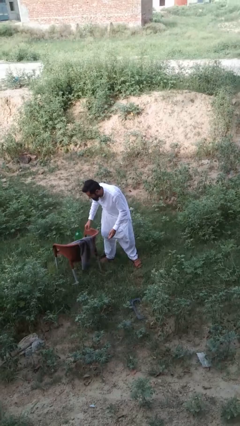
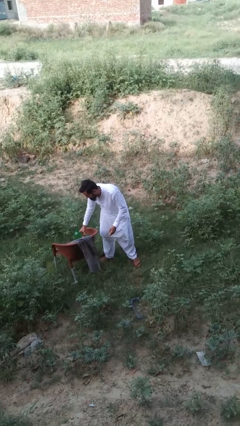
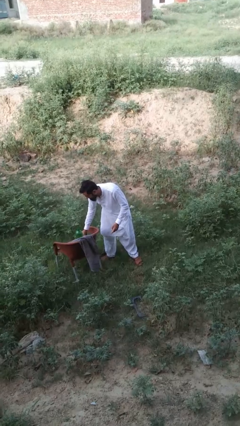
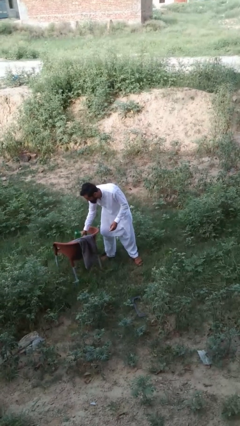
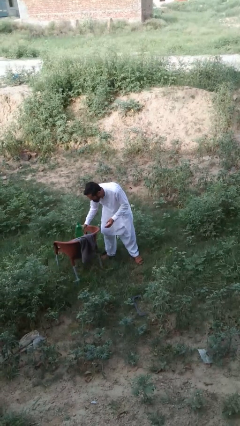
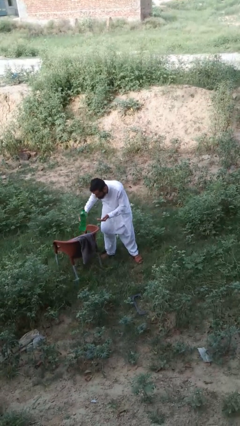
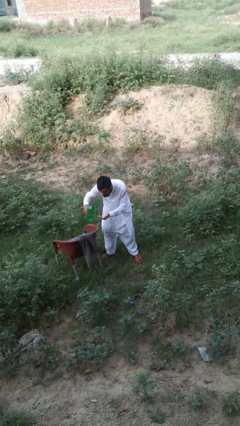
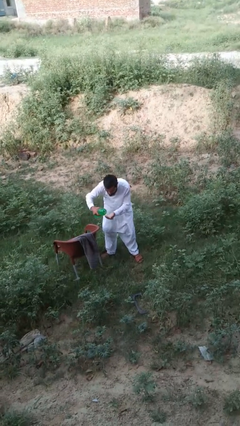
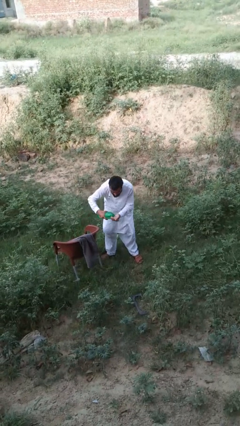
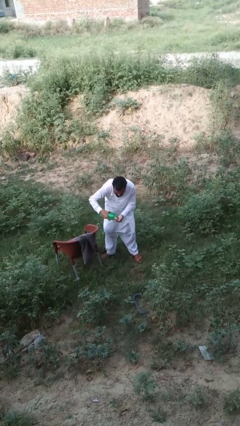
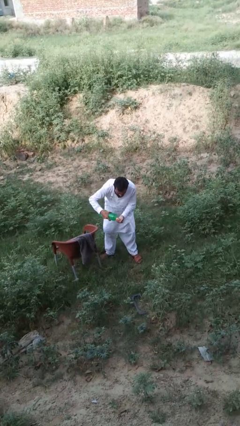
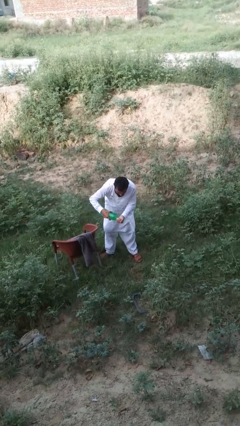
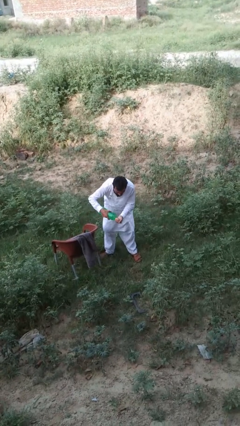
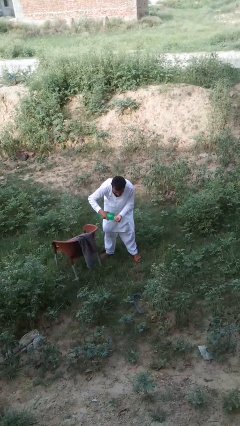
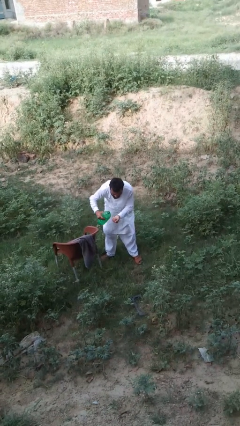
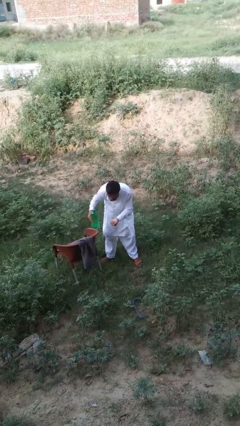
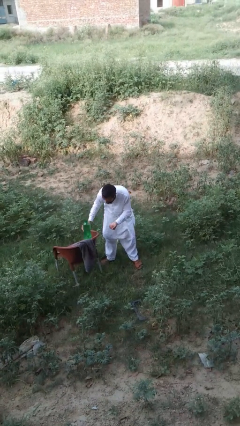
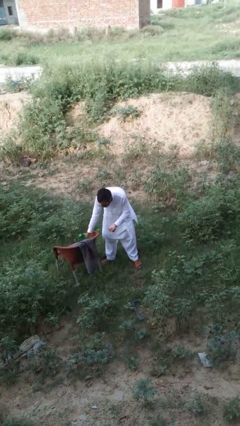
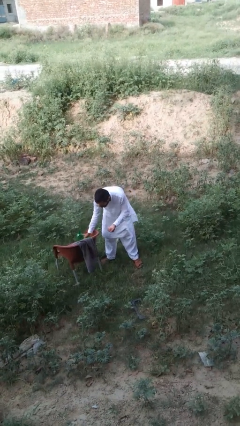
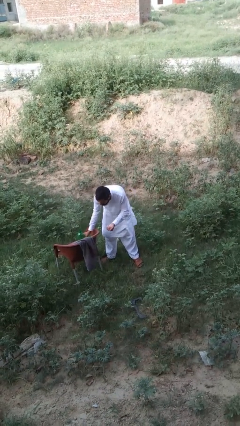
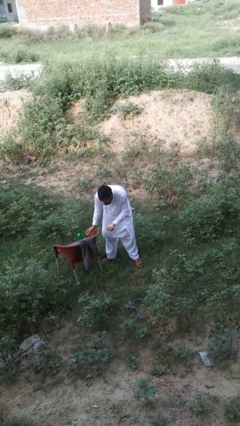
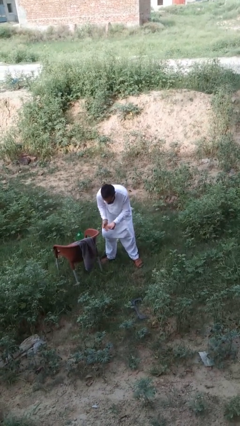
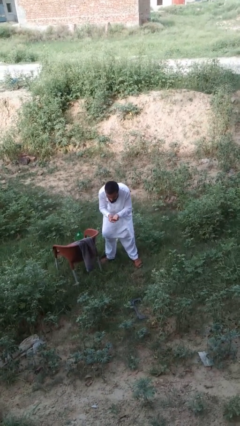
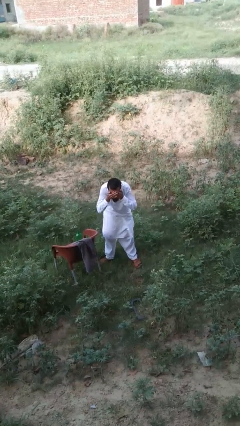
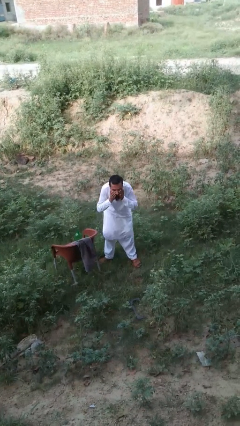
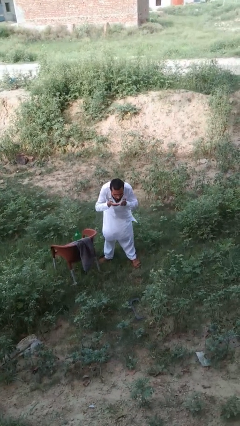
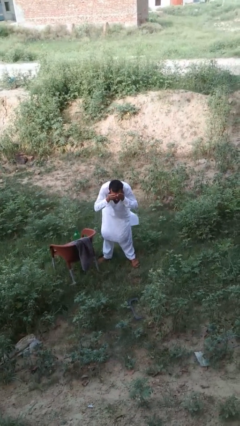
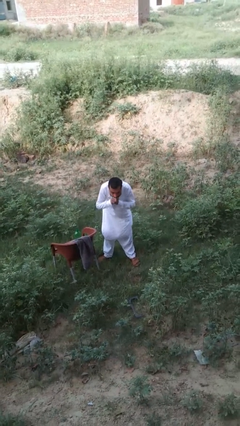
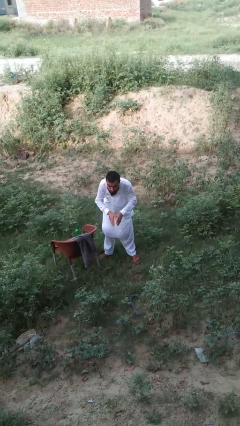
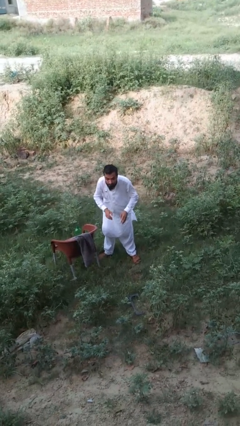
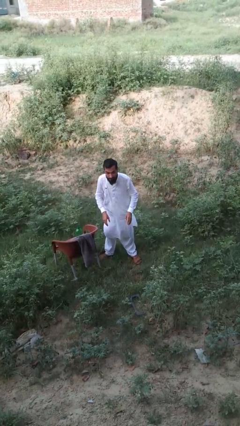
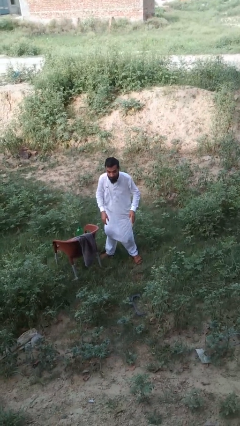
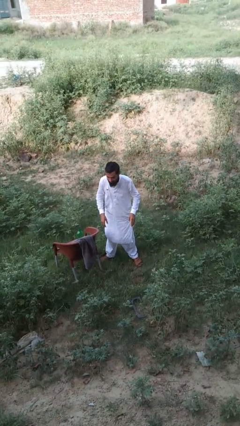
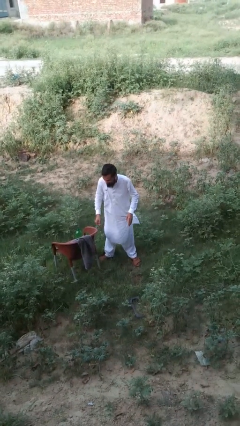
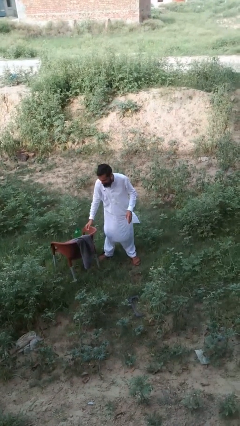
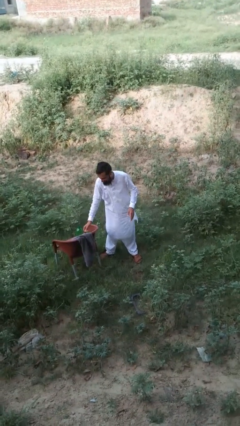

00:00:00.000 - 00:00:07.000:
person washes face

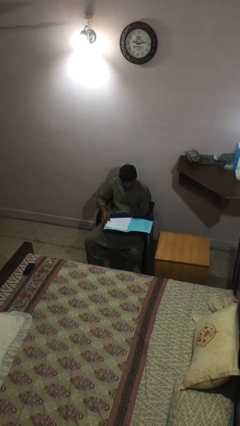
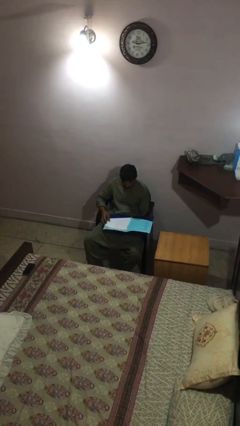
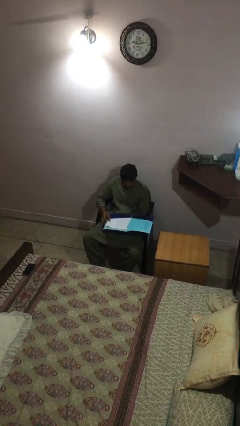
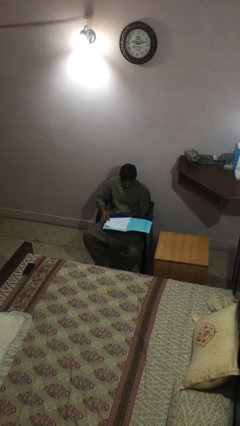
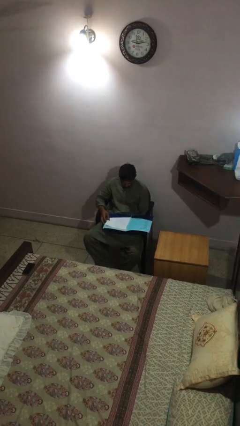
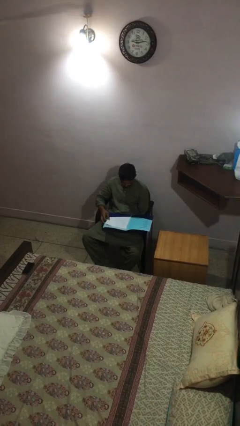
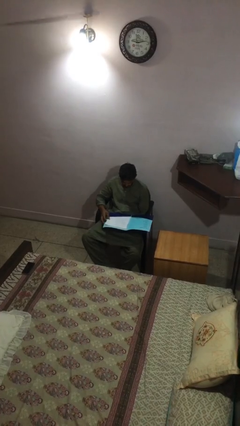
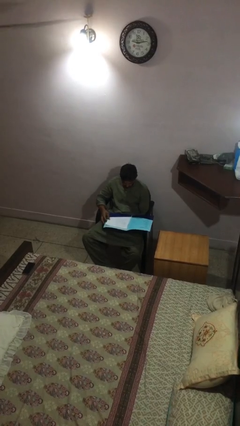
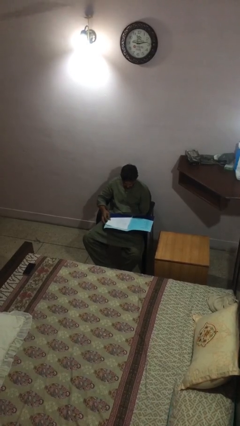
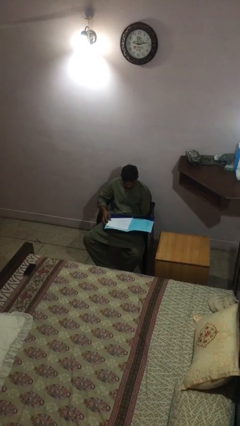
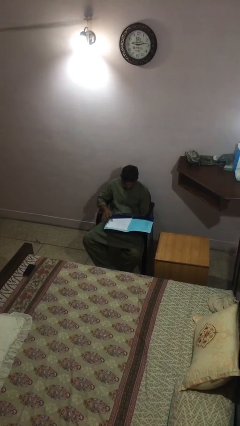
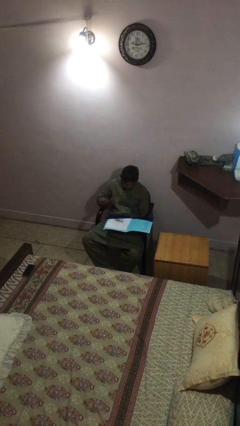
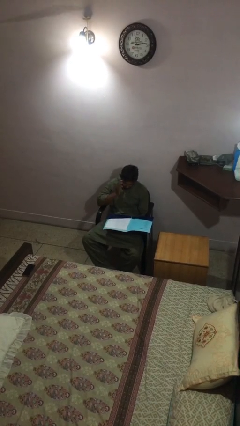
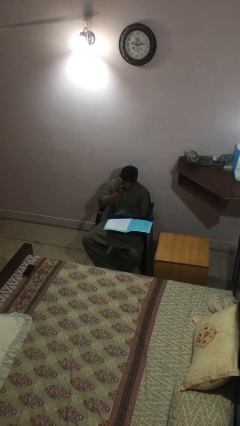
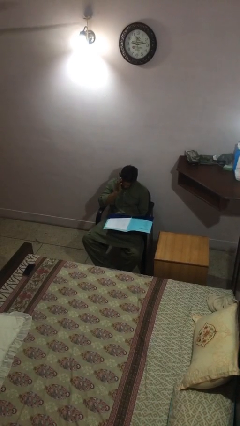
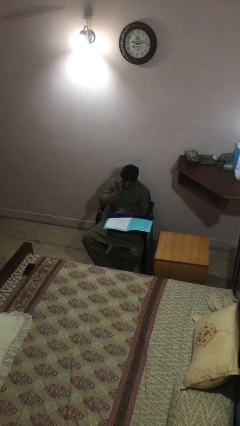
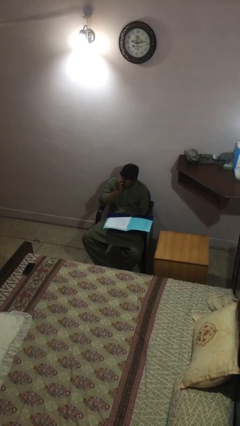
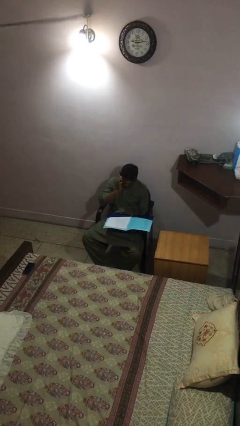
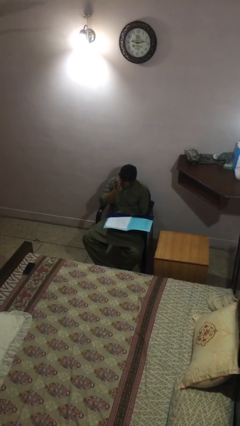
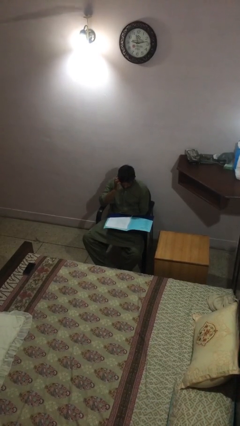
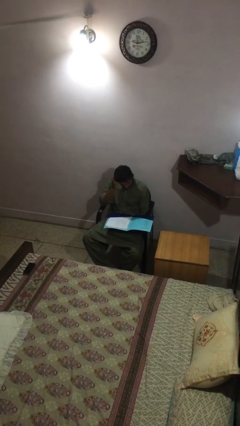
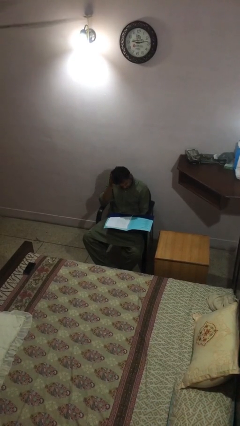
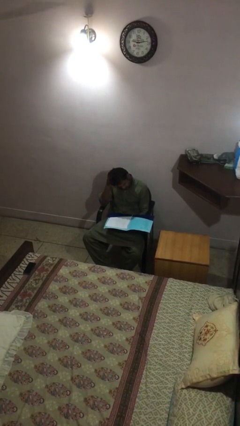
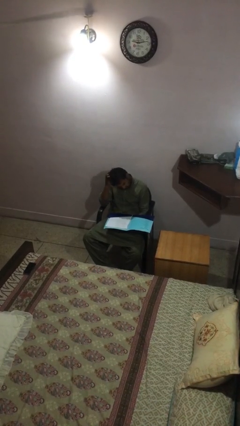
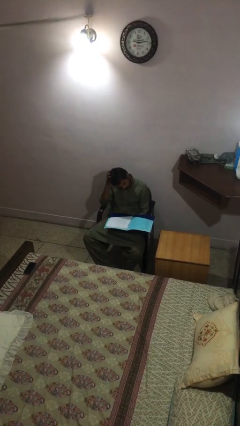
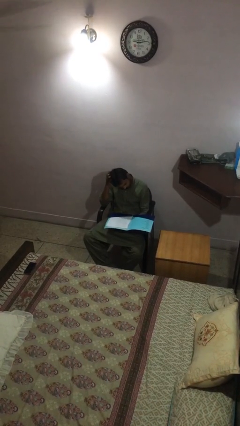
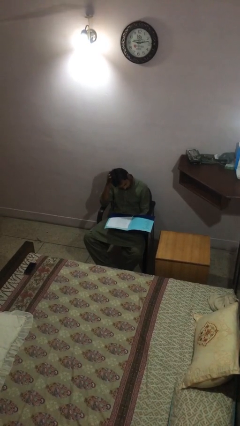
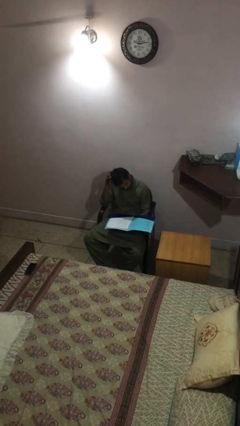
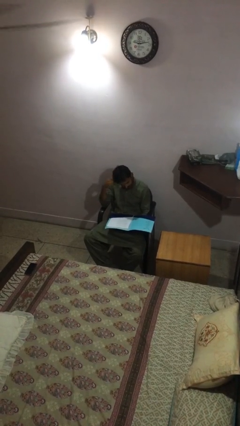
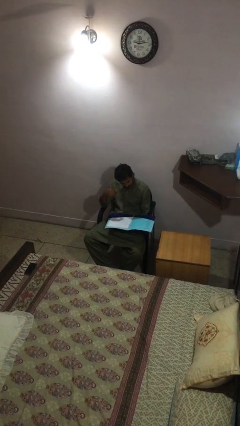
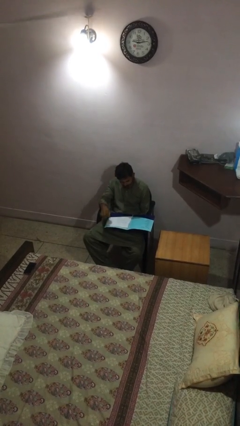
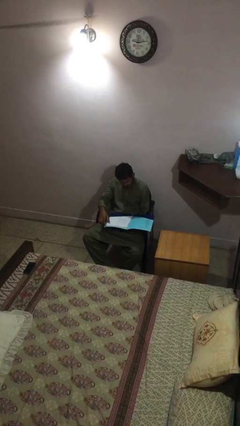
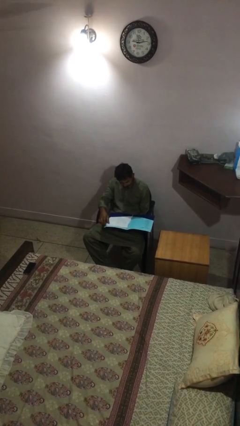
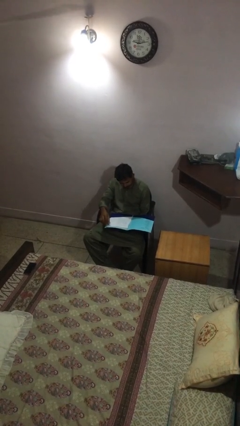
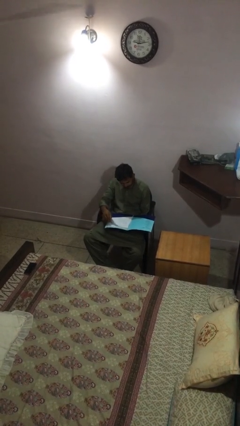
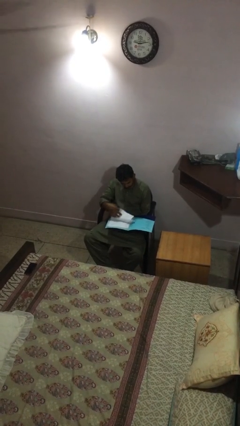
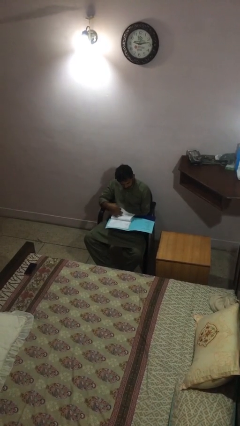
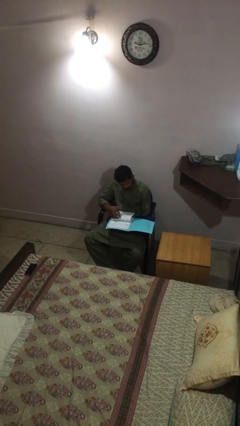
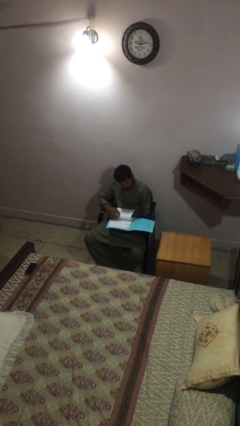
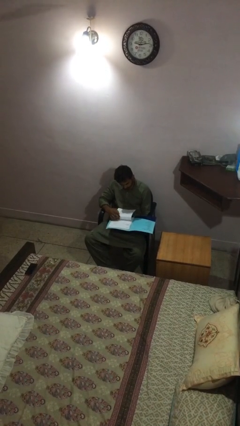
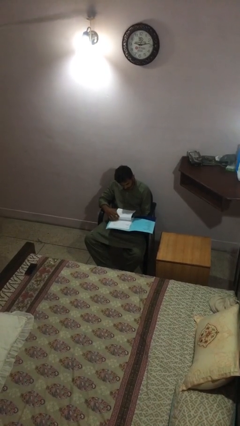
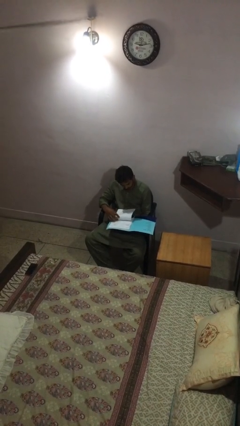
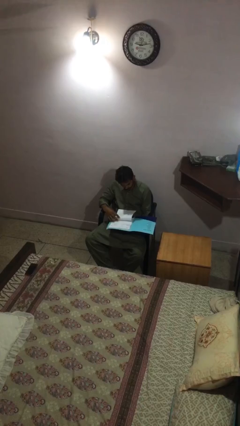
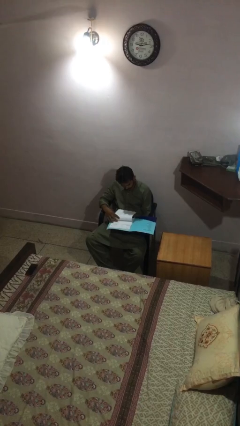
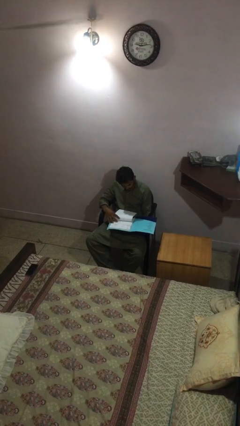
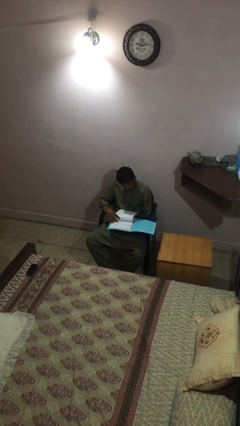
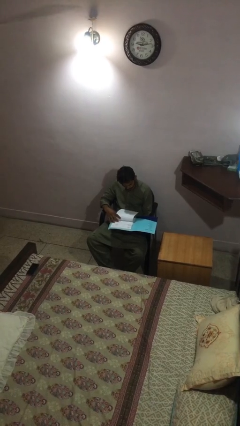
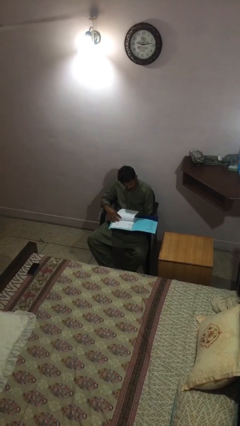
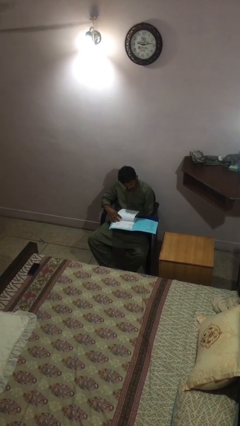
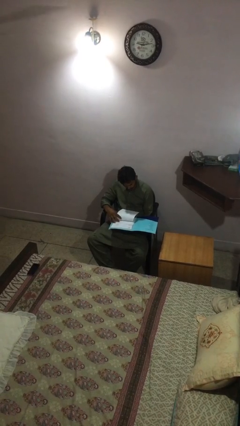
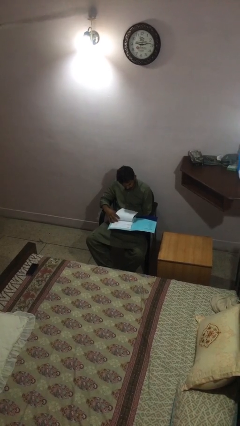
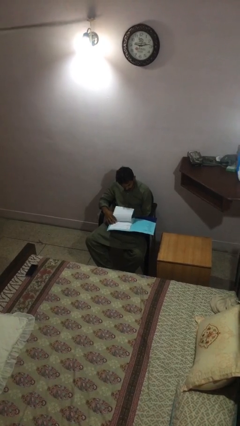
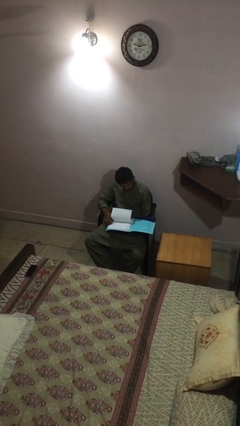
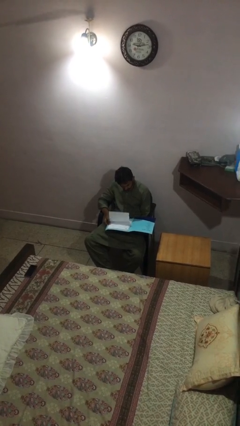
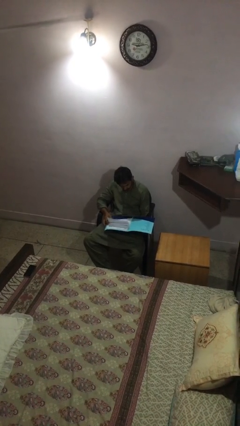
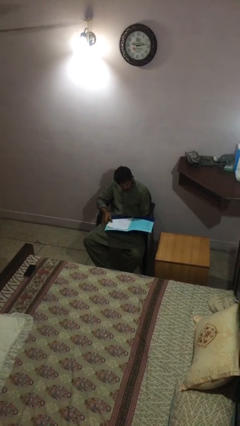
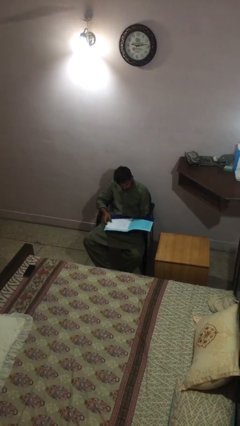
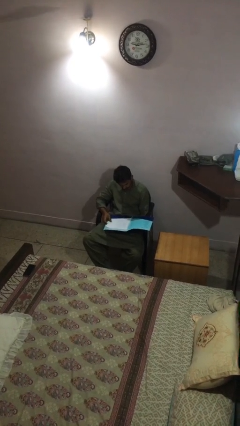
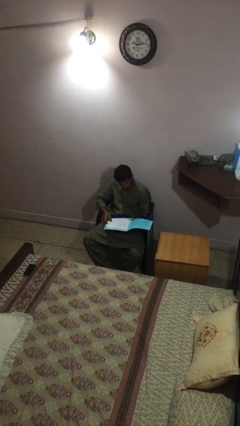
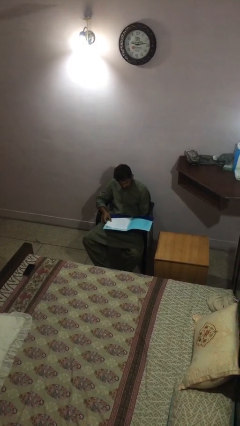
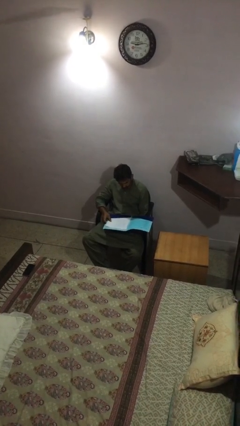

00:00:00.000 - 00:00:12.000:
person reads document
